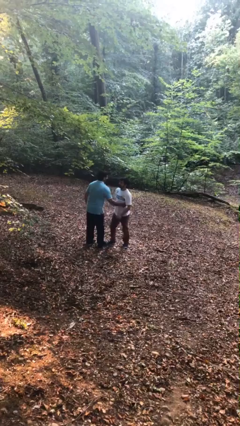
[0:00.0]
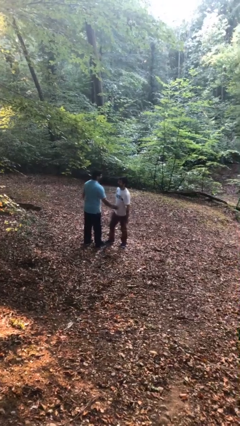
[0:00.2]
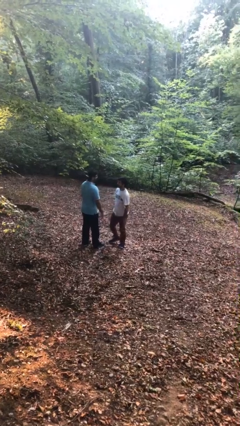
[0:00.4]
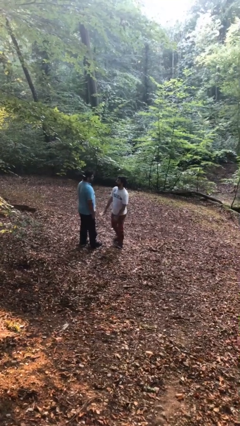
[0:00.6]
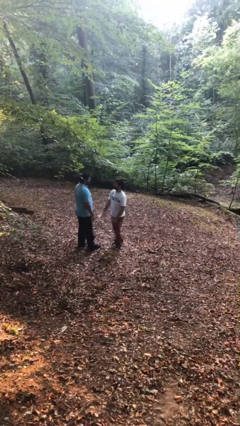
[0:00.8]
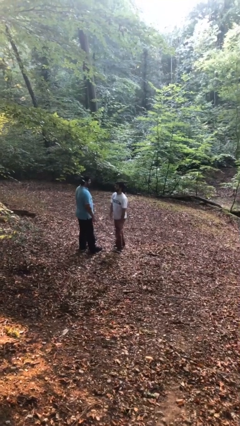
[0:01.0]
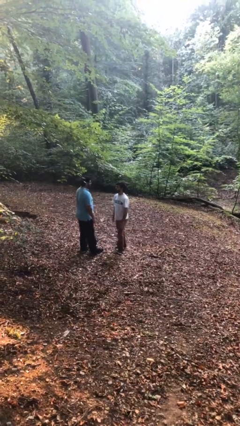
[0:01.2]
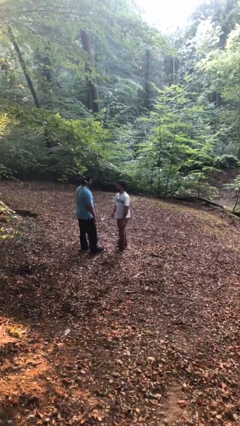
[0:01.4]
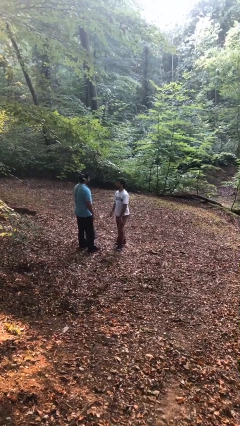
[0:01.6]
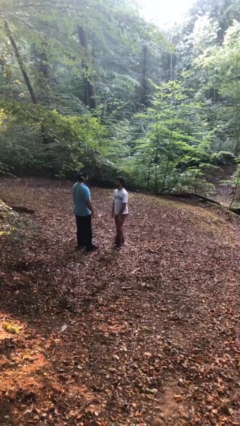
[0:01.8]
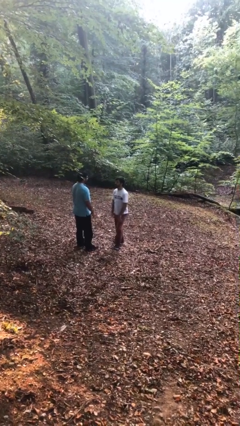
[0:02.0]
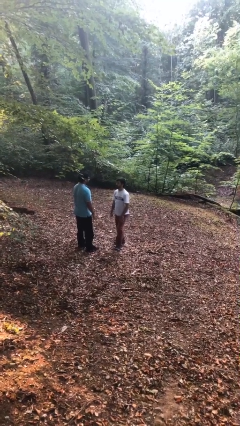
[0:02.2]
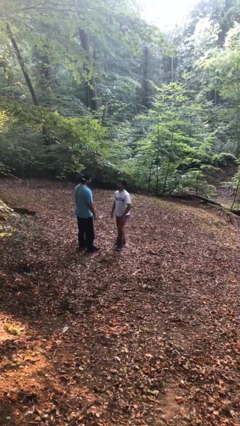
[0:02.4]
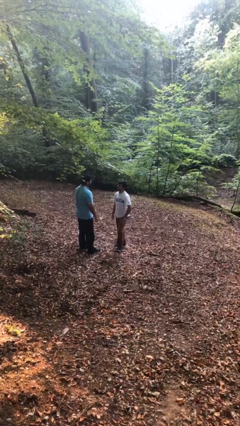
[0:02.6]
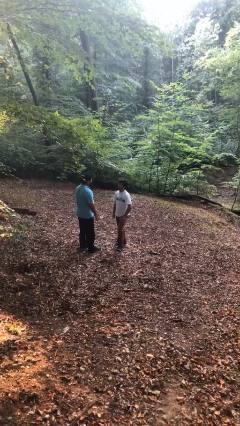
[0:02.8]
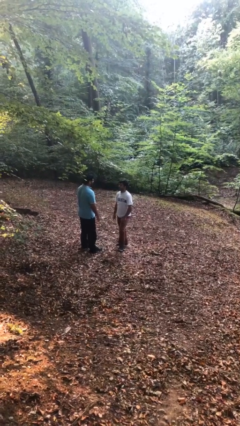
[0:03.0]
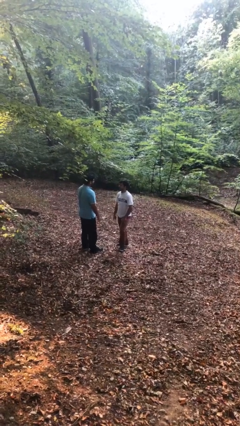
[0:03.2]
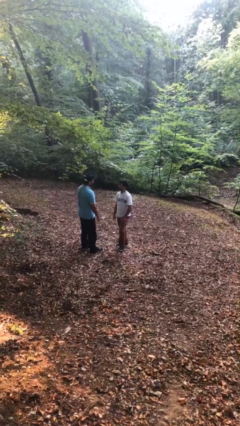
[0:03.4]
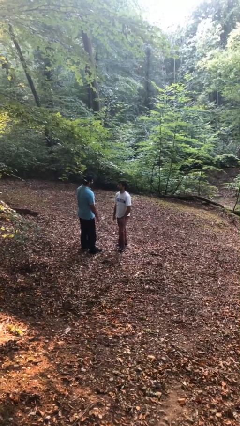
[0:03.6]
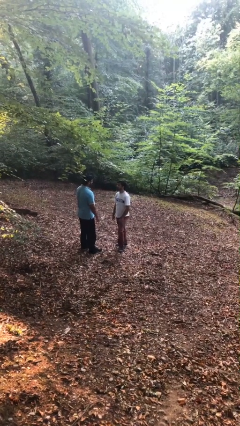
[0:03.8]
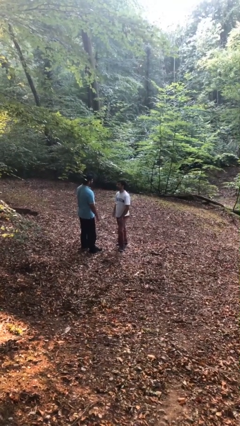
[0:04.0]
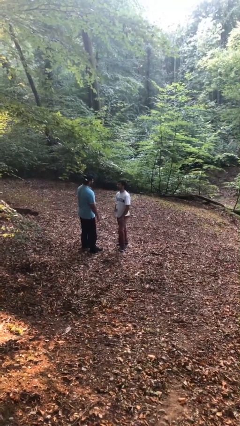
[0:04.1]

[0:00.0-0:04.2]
person talks to person

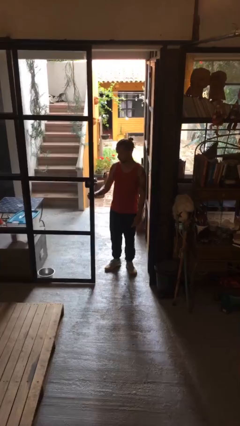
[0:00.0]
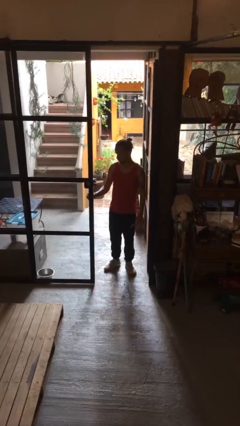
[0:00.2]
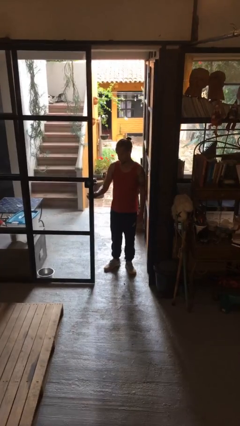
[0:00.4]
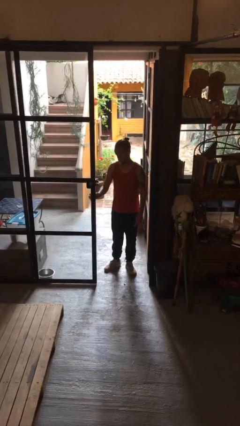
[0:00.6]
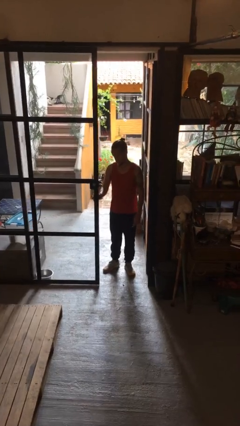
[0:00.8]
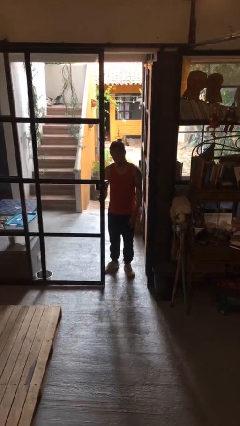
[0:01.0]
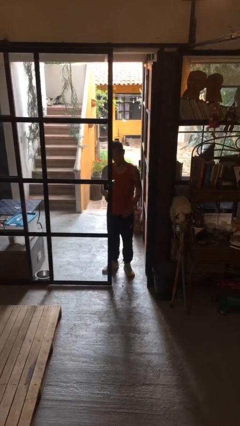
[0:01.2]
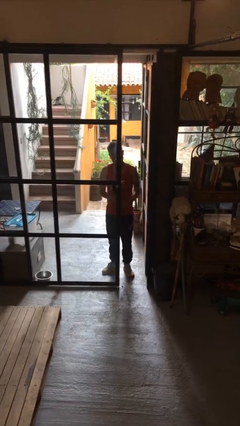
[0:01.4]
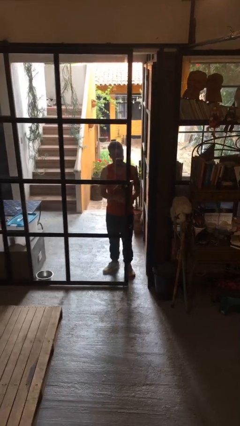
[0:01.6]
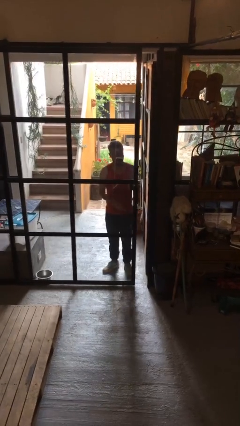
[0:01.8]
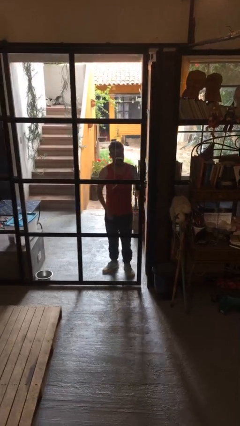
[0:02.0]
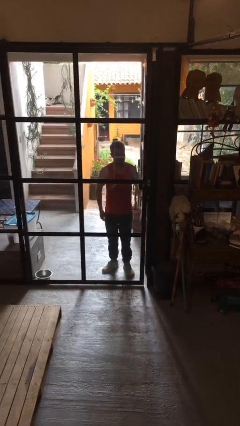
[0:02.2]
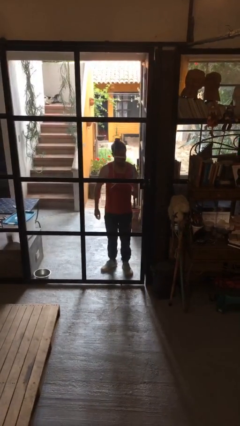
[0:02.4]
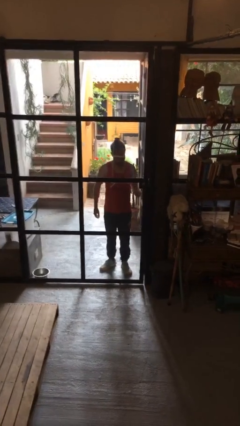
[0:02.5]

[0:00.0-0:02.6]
person closes sliding door

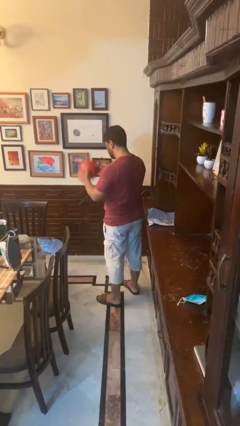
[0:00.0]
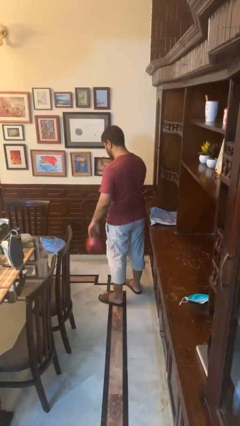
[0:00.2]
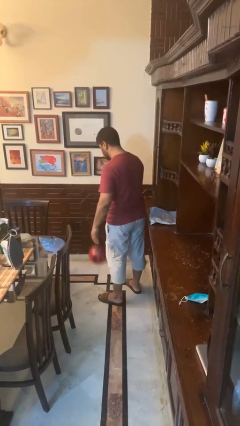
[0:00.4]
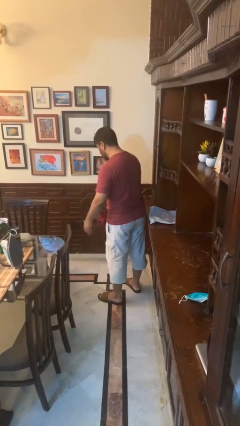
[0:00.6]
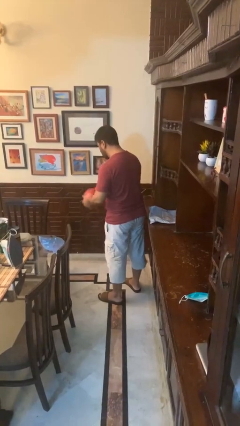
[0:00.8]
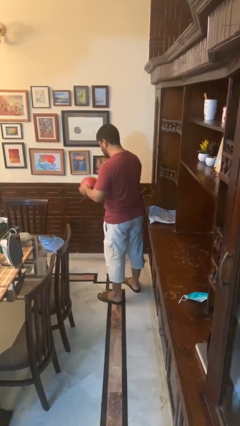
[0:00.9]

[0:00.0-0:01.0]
person bounces ball on floor

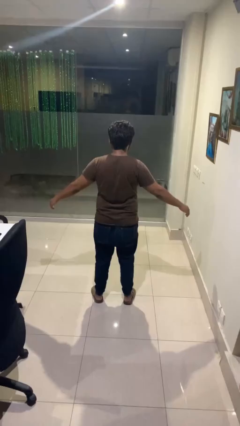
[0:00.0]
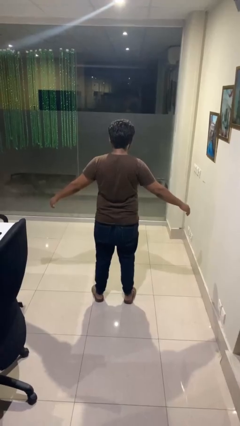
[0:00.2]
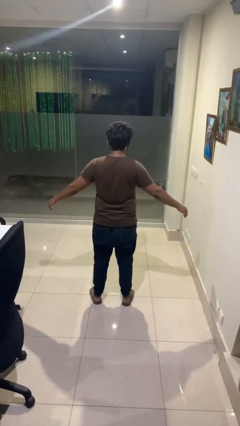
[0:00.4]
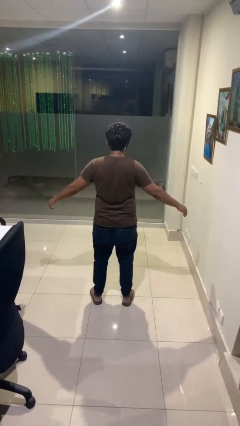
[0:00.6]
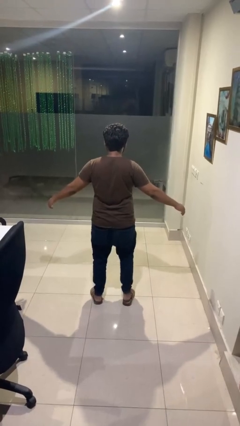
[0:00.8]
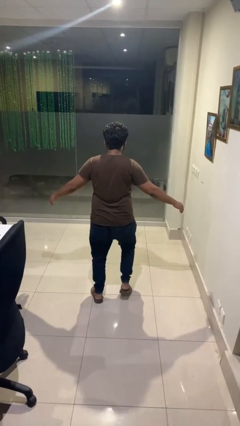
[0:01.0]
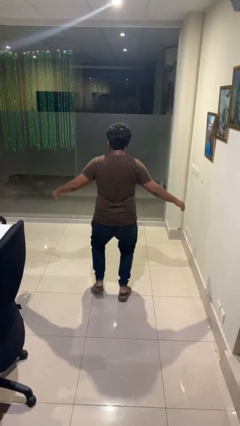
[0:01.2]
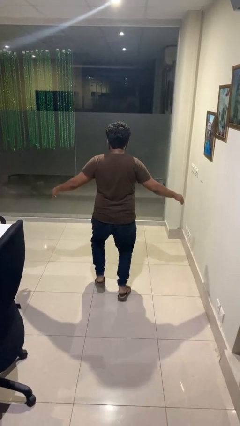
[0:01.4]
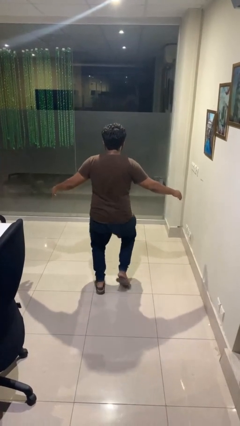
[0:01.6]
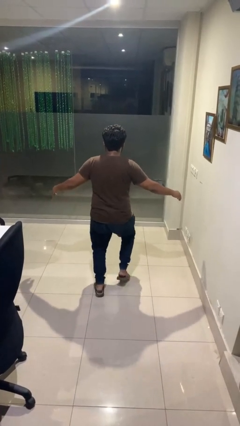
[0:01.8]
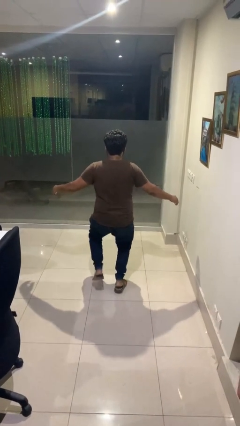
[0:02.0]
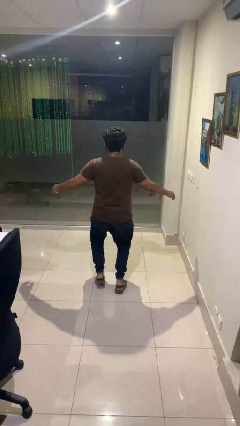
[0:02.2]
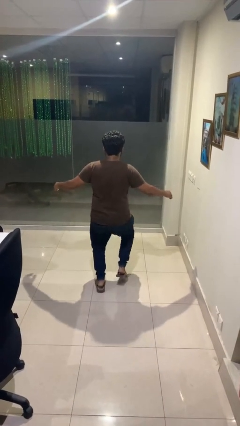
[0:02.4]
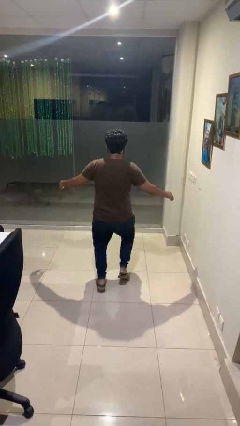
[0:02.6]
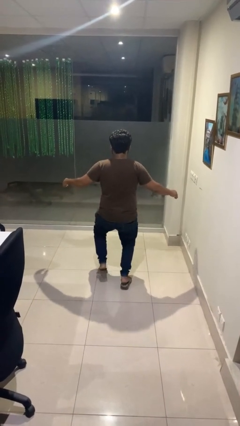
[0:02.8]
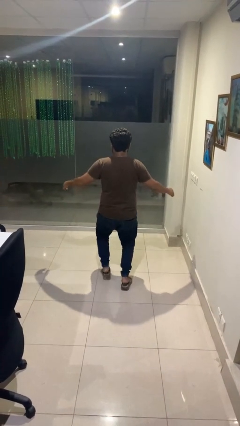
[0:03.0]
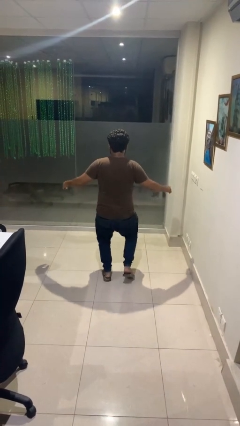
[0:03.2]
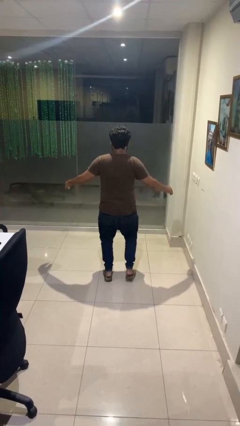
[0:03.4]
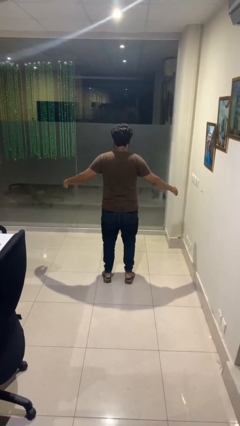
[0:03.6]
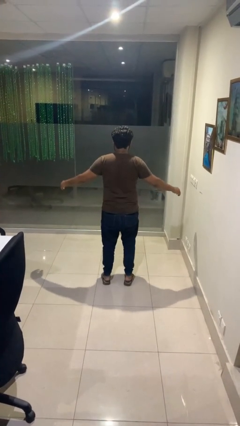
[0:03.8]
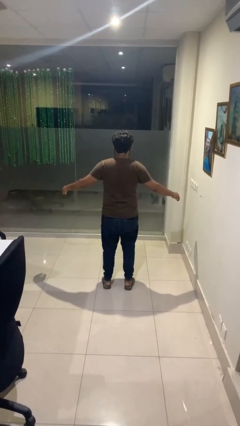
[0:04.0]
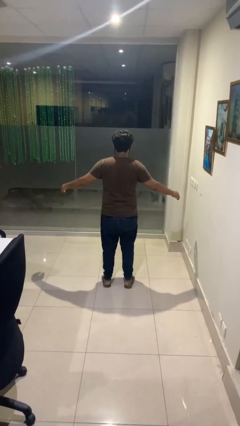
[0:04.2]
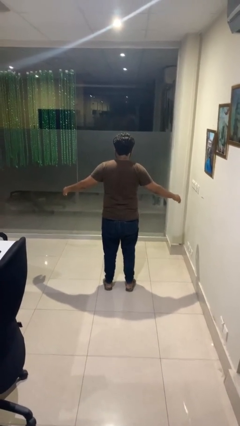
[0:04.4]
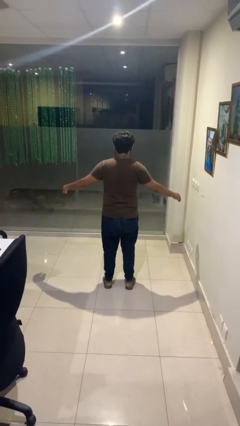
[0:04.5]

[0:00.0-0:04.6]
person walks tiptoe

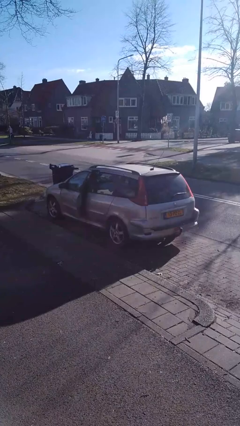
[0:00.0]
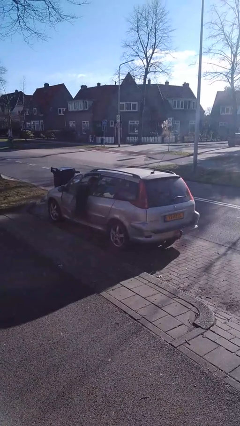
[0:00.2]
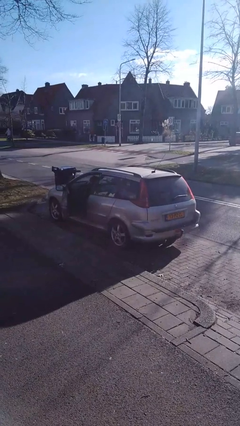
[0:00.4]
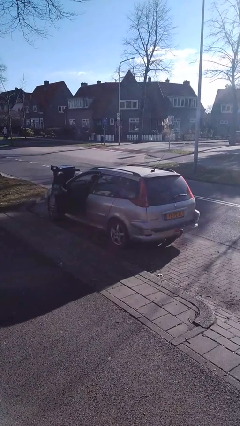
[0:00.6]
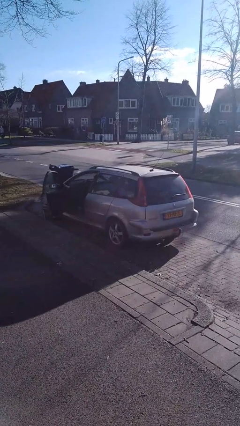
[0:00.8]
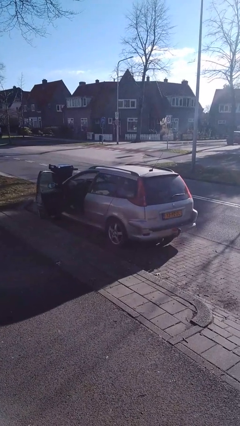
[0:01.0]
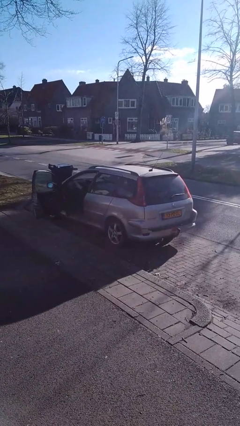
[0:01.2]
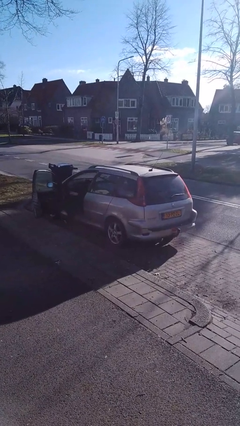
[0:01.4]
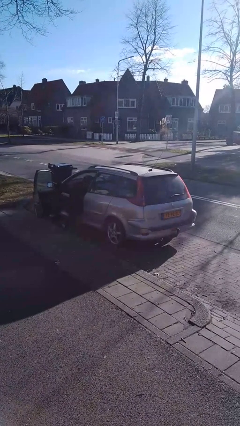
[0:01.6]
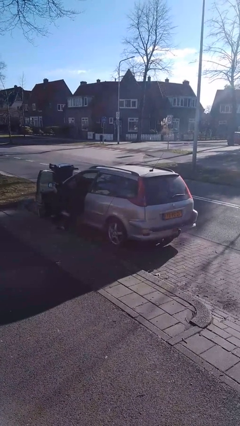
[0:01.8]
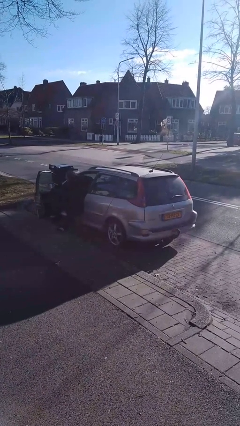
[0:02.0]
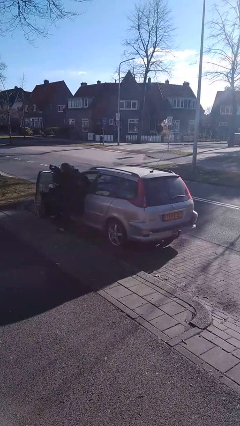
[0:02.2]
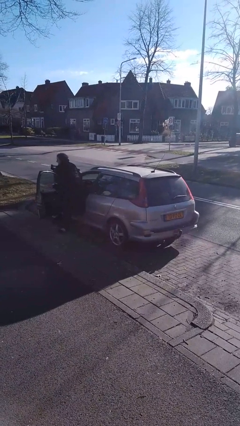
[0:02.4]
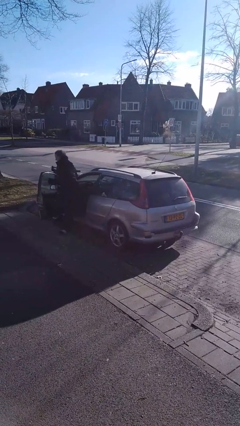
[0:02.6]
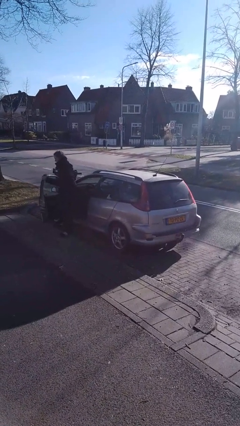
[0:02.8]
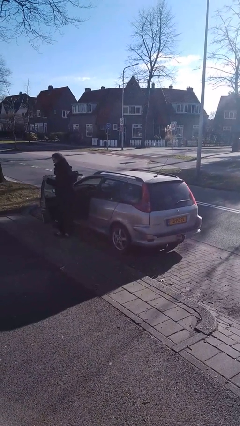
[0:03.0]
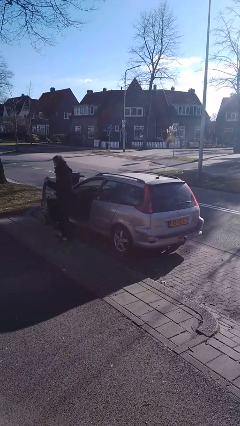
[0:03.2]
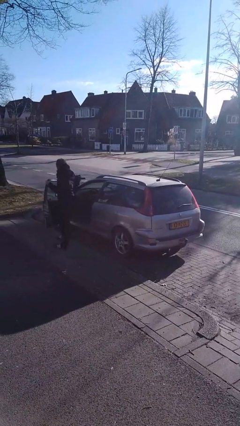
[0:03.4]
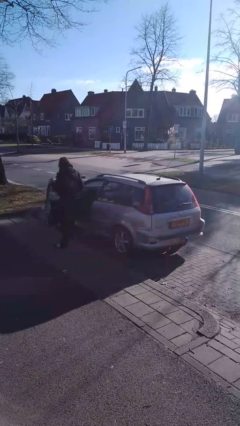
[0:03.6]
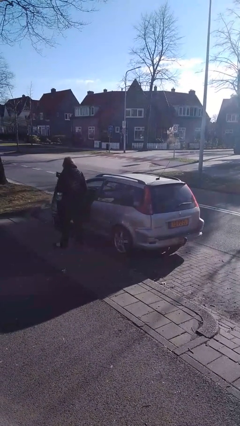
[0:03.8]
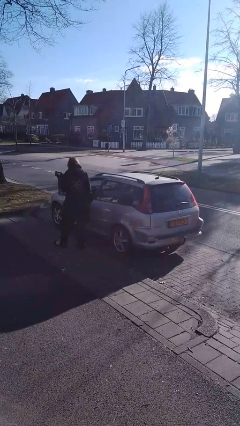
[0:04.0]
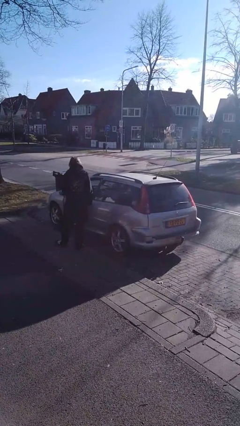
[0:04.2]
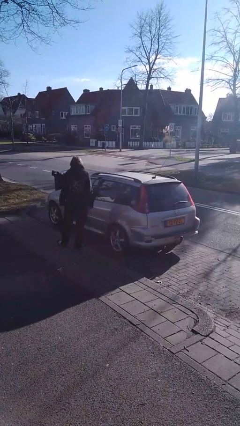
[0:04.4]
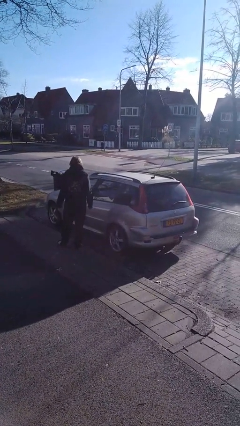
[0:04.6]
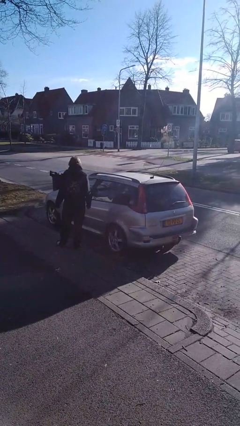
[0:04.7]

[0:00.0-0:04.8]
car drops off person

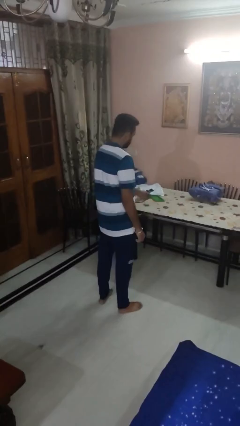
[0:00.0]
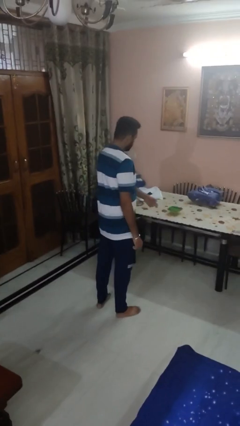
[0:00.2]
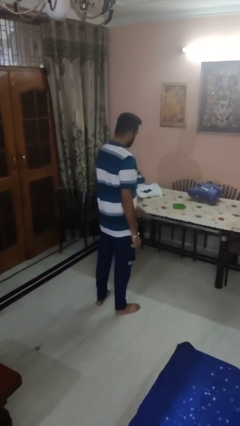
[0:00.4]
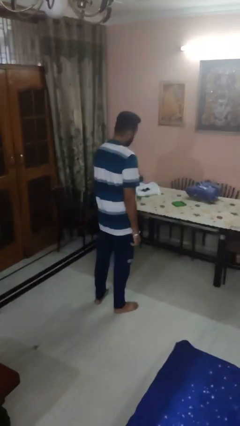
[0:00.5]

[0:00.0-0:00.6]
person throws object on table
